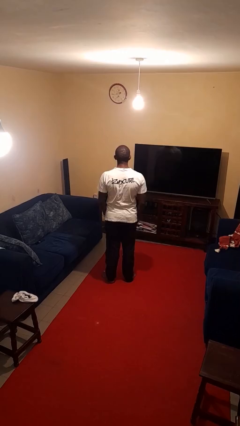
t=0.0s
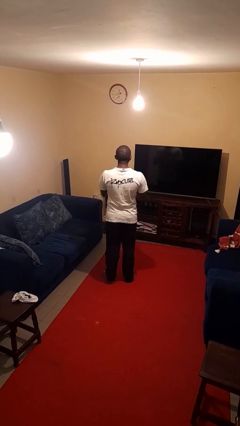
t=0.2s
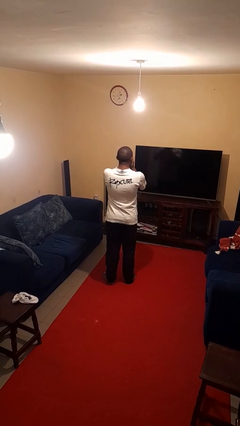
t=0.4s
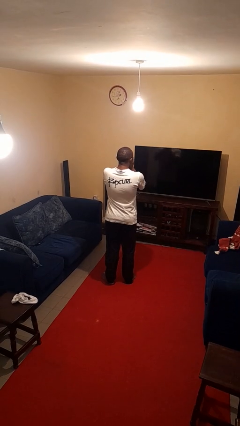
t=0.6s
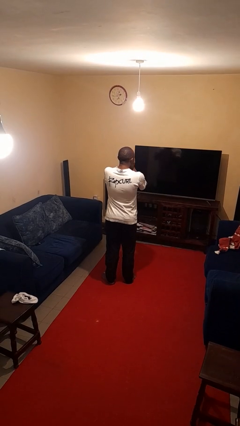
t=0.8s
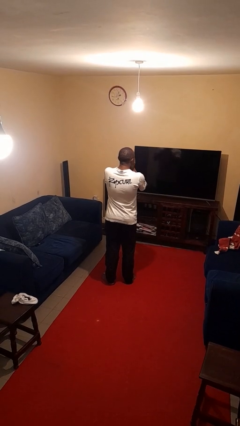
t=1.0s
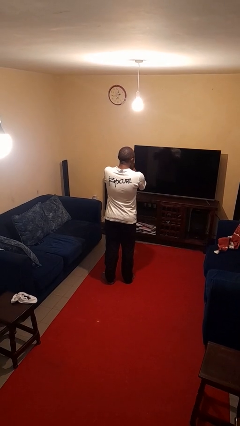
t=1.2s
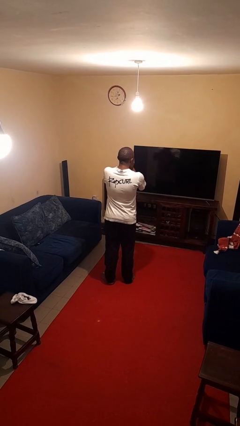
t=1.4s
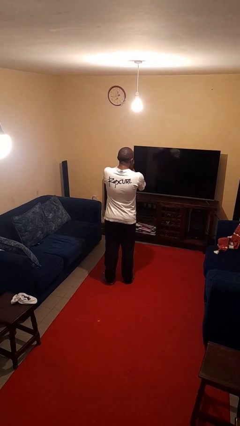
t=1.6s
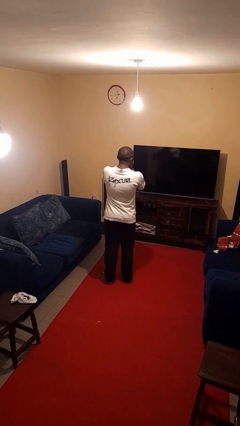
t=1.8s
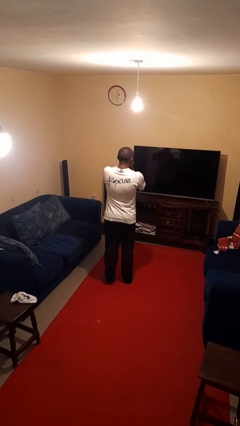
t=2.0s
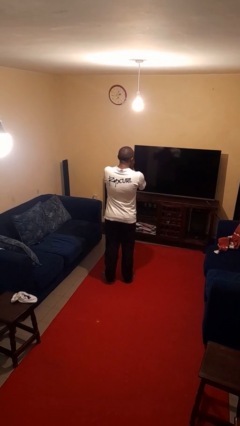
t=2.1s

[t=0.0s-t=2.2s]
person sneezes into hand

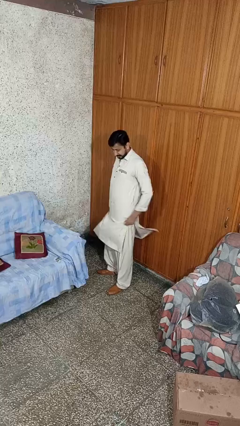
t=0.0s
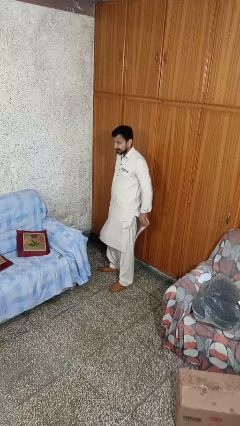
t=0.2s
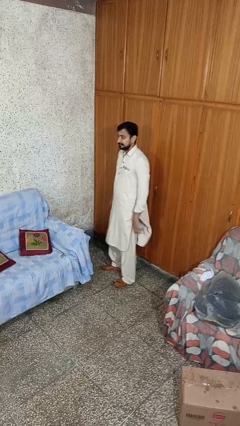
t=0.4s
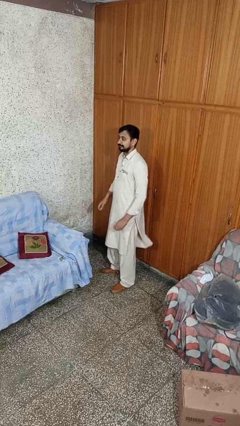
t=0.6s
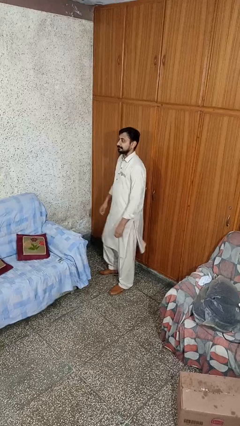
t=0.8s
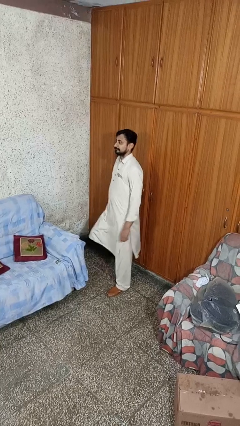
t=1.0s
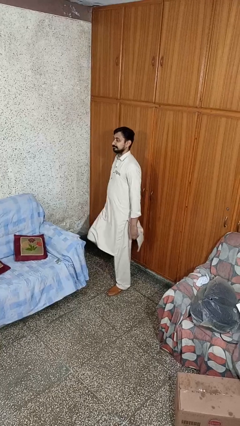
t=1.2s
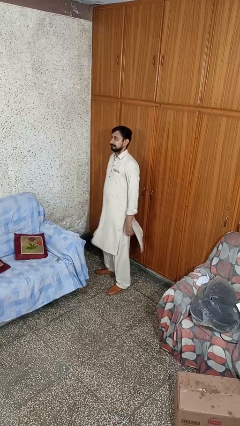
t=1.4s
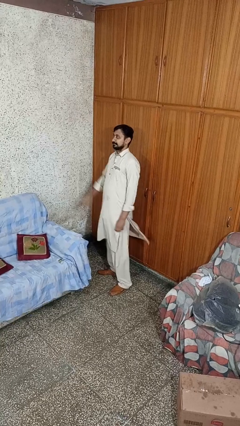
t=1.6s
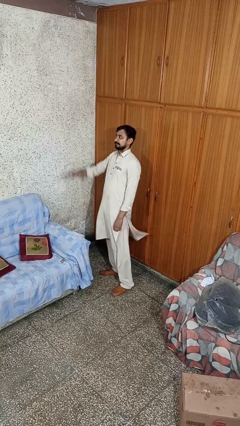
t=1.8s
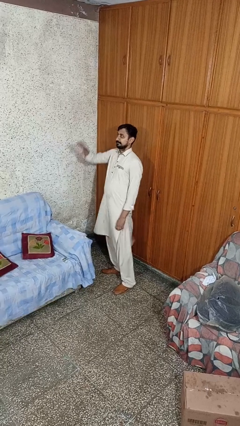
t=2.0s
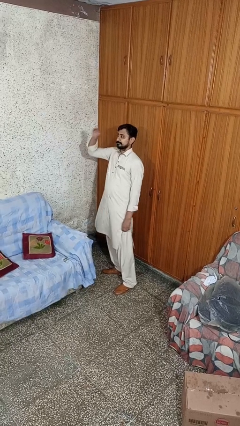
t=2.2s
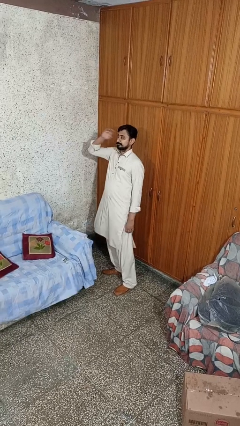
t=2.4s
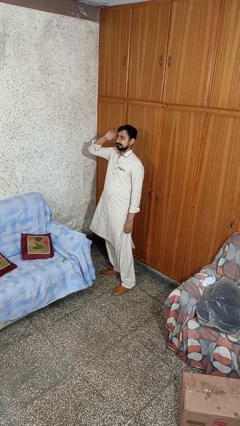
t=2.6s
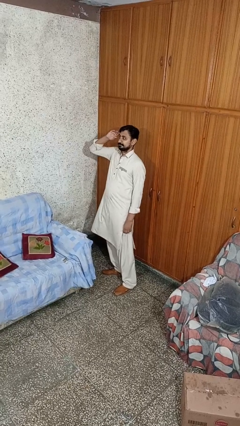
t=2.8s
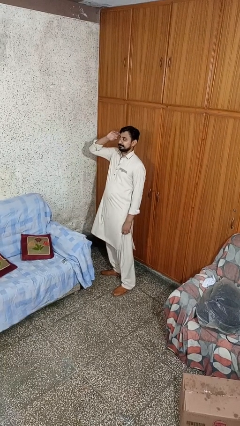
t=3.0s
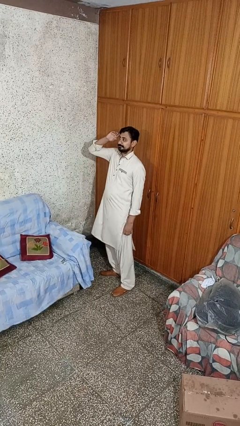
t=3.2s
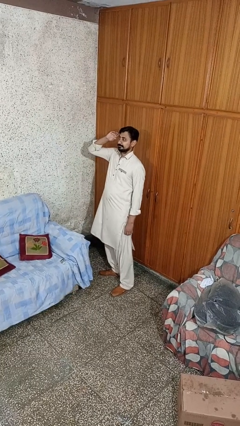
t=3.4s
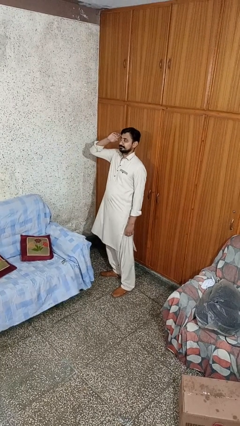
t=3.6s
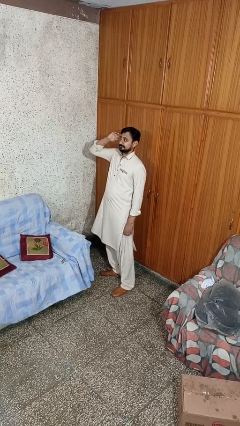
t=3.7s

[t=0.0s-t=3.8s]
person salutes

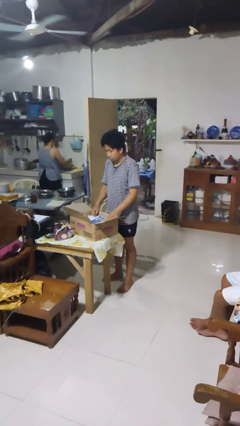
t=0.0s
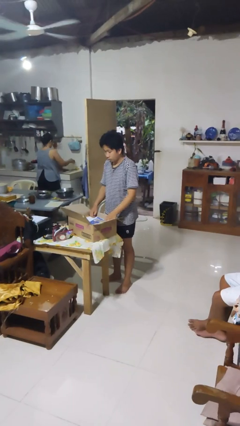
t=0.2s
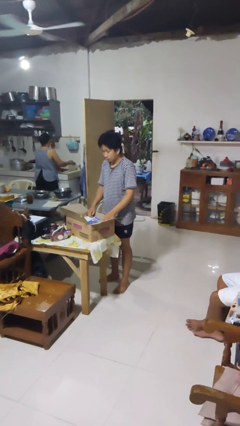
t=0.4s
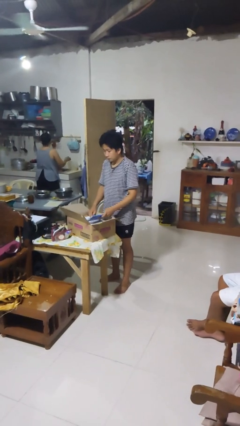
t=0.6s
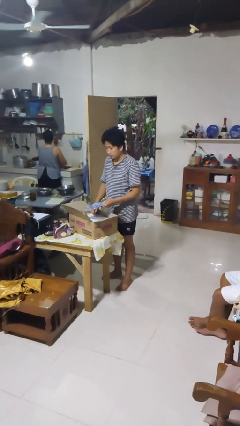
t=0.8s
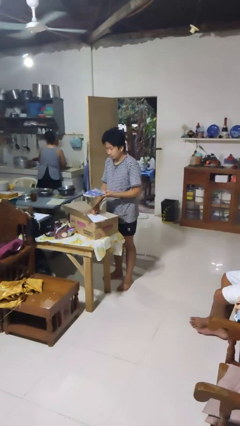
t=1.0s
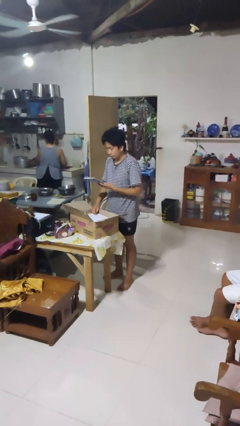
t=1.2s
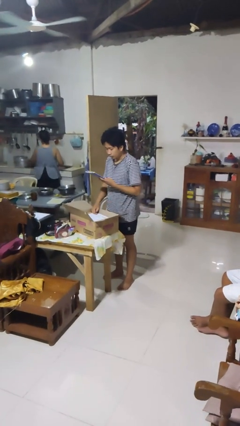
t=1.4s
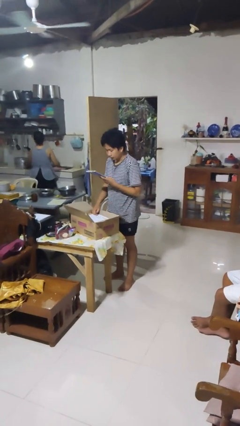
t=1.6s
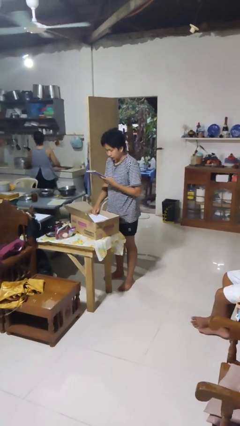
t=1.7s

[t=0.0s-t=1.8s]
person takes object from box

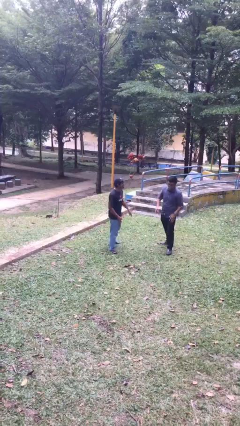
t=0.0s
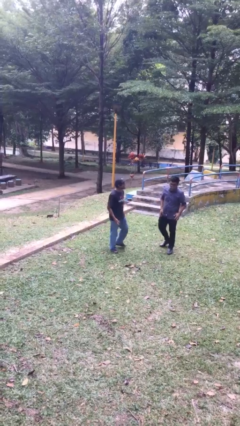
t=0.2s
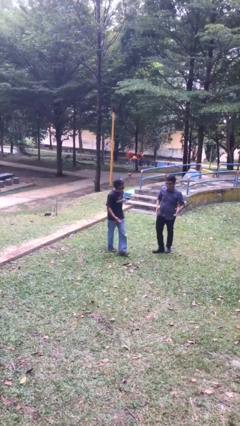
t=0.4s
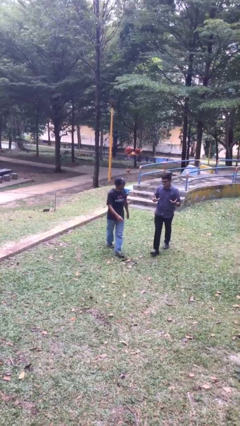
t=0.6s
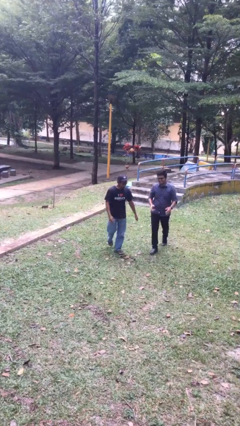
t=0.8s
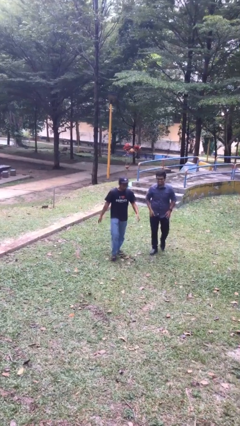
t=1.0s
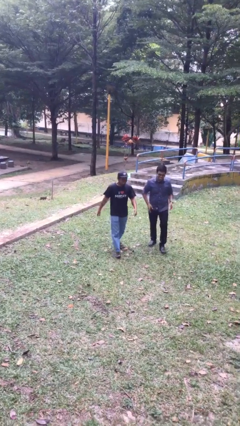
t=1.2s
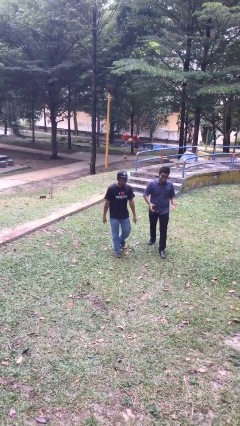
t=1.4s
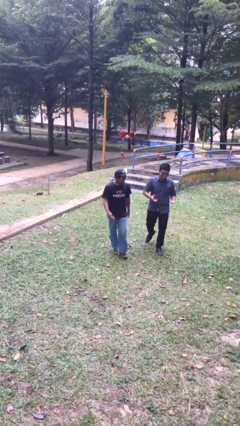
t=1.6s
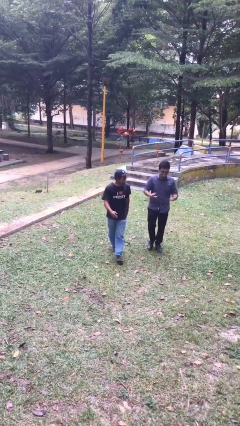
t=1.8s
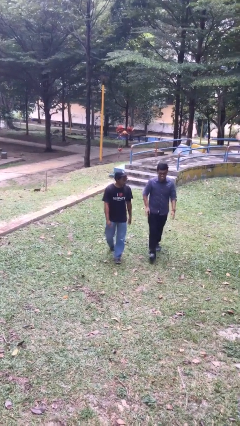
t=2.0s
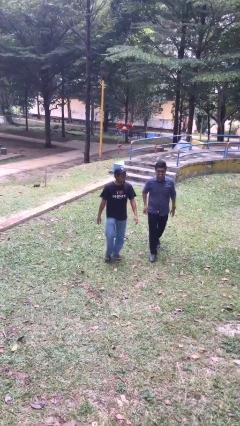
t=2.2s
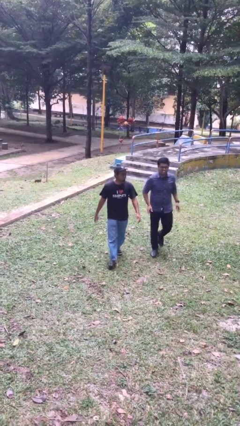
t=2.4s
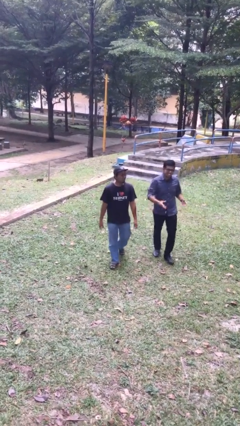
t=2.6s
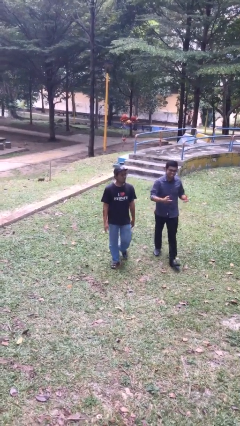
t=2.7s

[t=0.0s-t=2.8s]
person talks to person

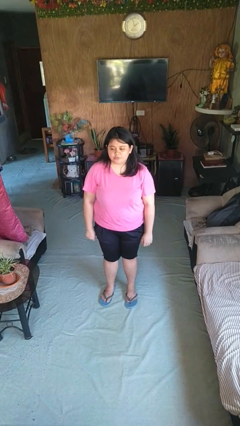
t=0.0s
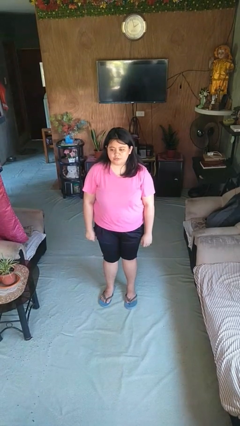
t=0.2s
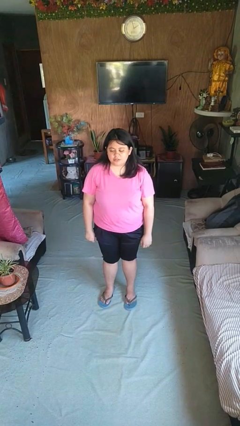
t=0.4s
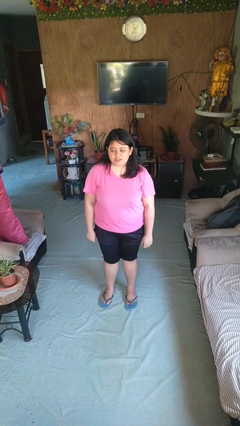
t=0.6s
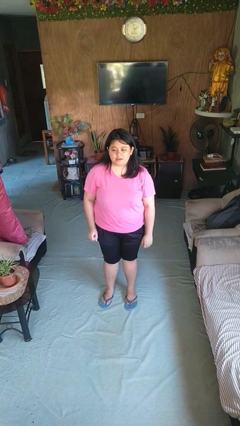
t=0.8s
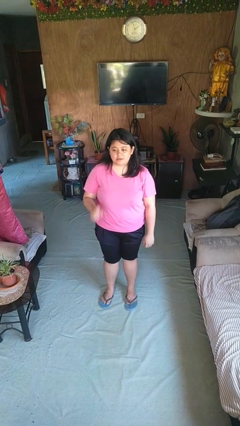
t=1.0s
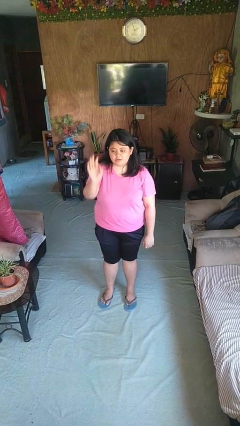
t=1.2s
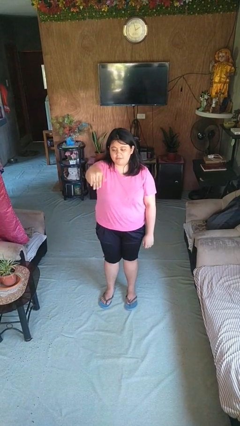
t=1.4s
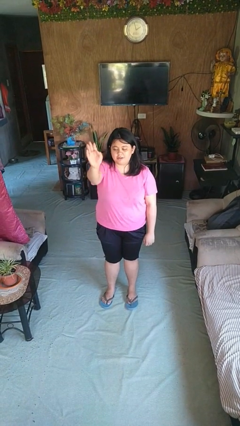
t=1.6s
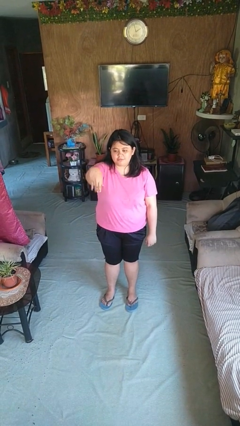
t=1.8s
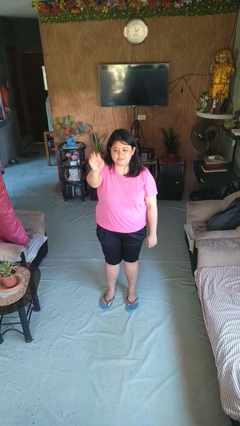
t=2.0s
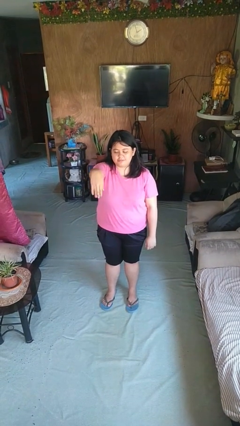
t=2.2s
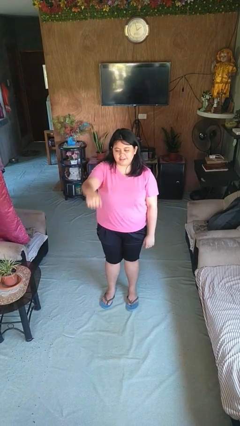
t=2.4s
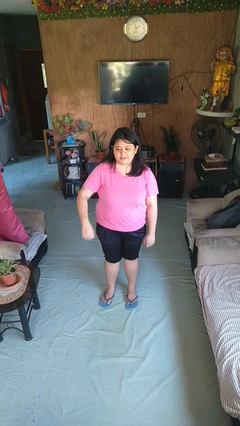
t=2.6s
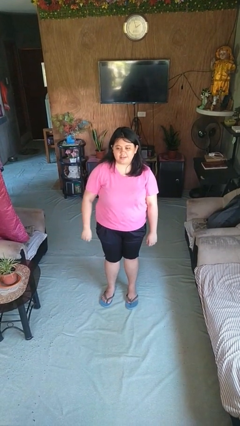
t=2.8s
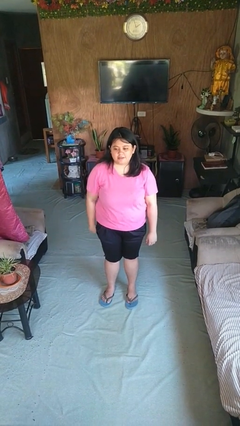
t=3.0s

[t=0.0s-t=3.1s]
person gestures come here

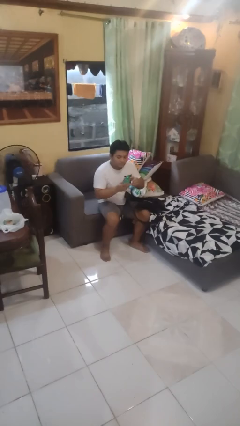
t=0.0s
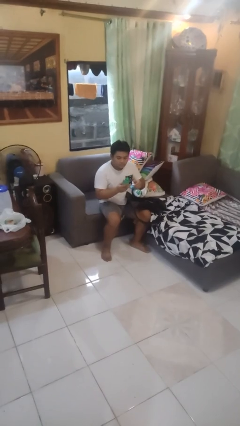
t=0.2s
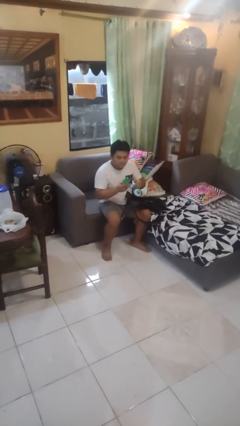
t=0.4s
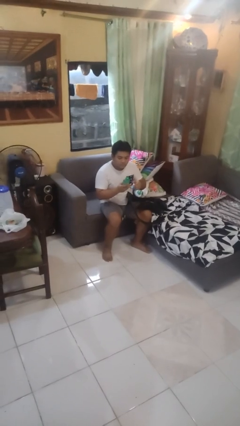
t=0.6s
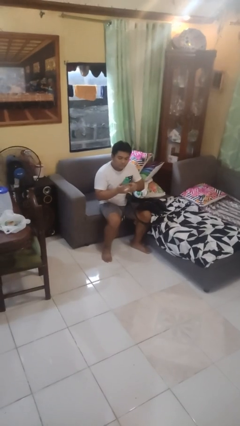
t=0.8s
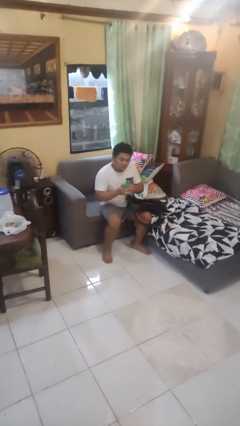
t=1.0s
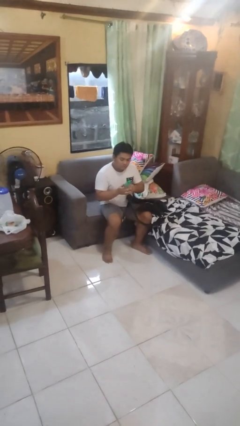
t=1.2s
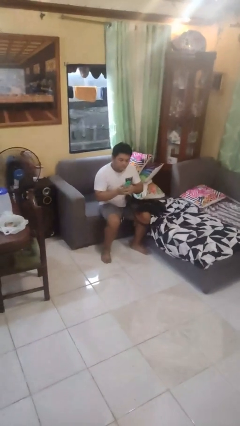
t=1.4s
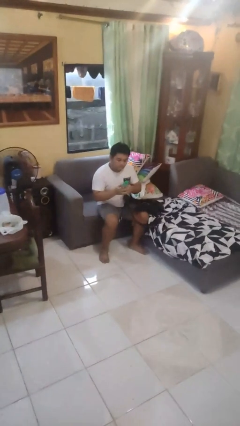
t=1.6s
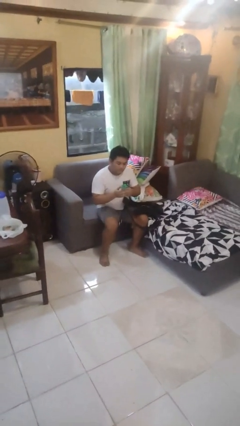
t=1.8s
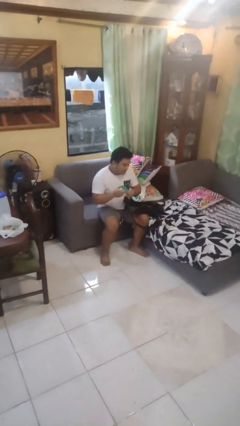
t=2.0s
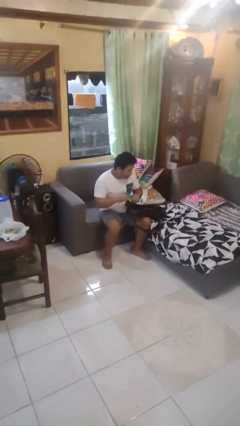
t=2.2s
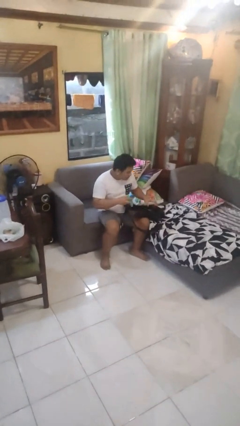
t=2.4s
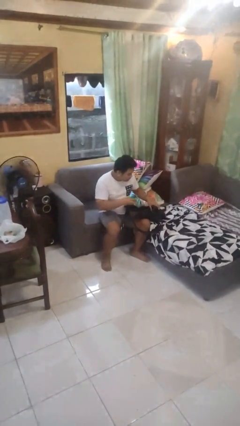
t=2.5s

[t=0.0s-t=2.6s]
person takes object from backpack

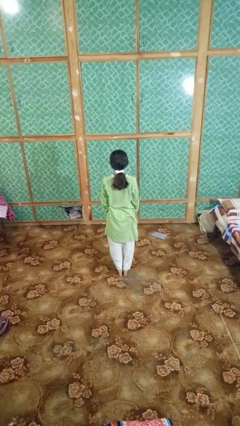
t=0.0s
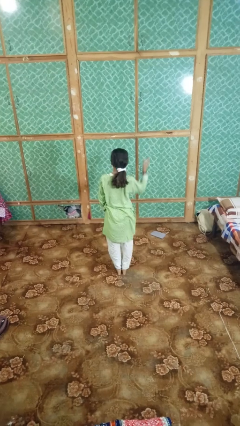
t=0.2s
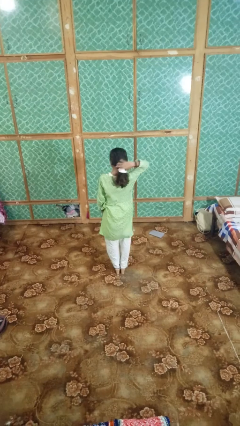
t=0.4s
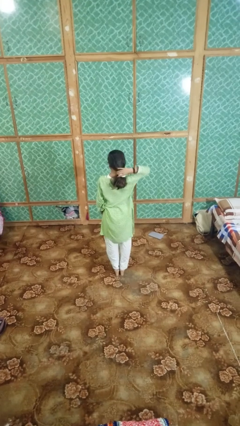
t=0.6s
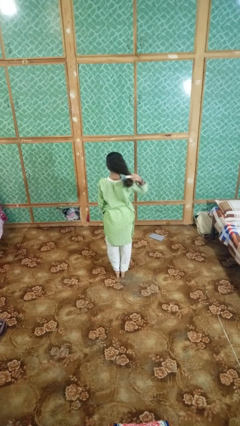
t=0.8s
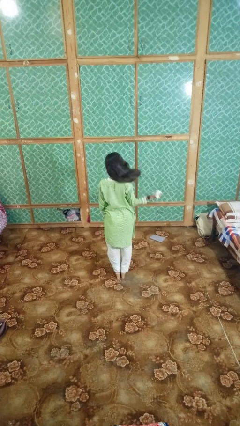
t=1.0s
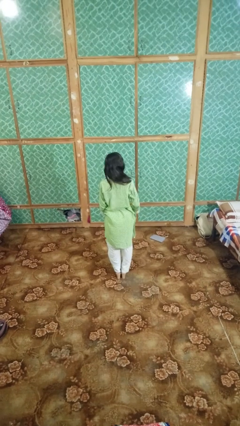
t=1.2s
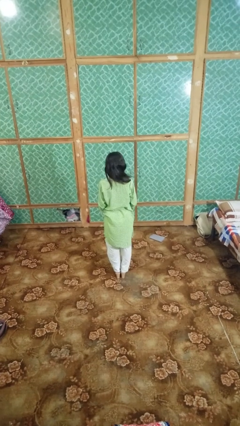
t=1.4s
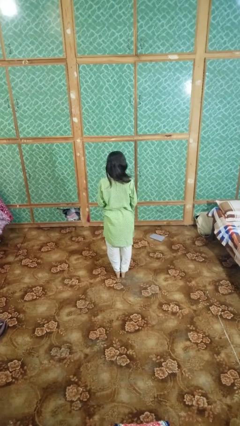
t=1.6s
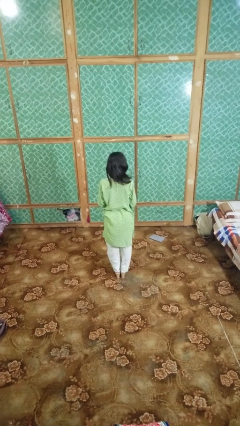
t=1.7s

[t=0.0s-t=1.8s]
person takes off hairtie
